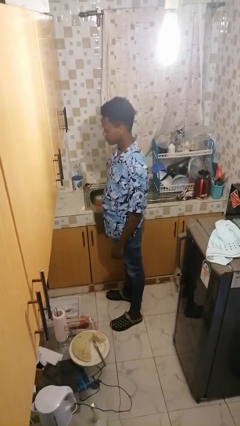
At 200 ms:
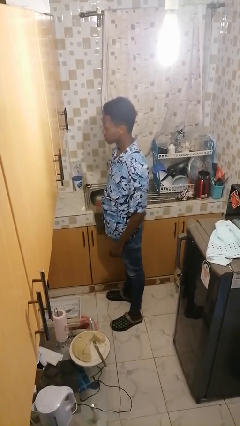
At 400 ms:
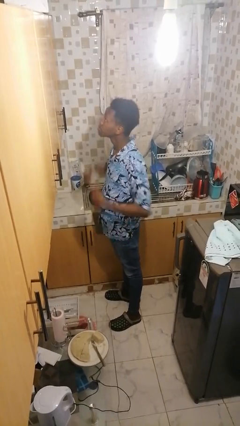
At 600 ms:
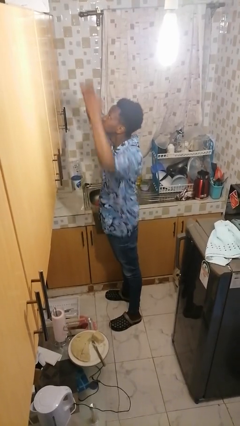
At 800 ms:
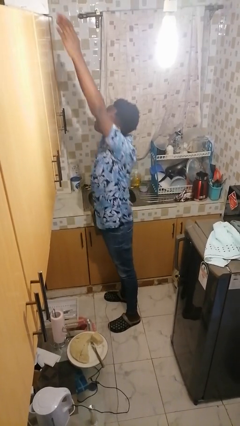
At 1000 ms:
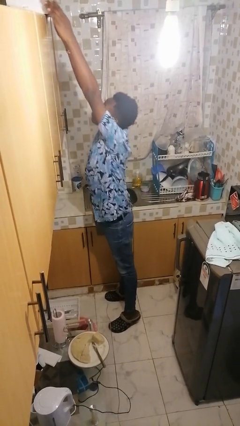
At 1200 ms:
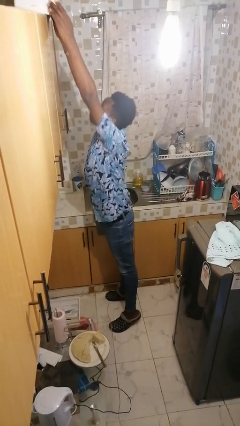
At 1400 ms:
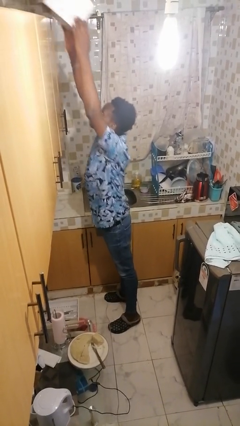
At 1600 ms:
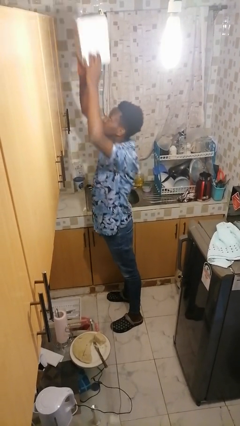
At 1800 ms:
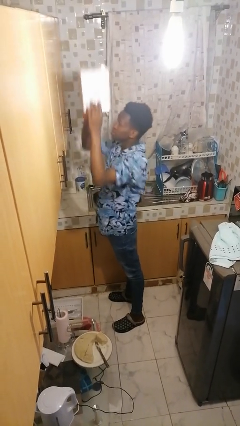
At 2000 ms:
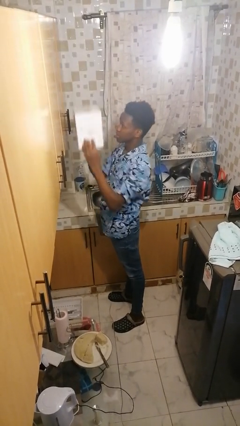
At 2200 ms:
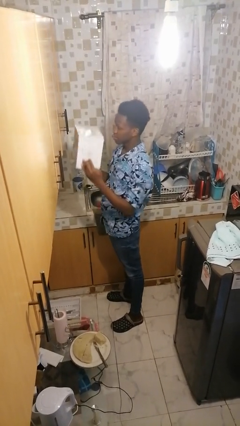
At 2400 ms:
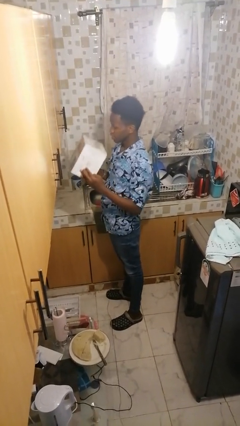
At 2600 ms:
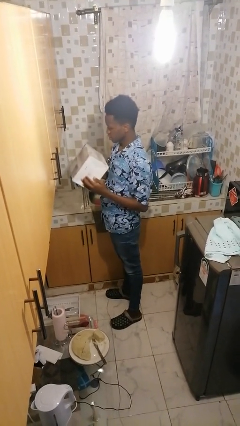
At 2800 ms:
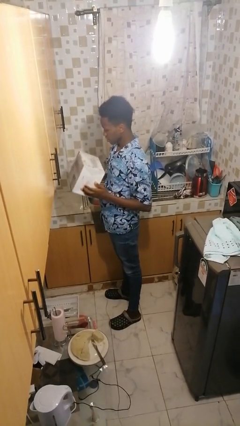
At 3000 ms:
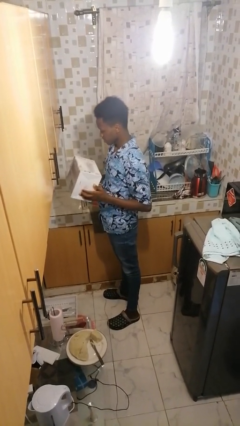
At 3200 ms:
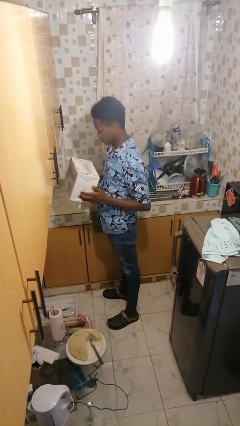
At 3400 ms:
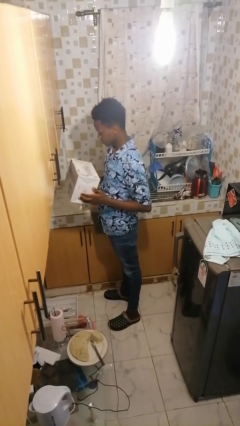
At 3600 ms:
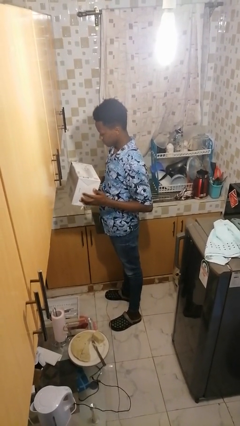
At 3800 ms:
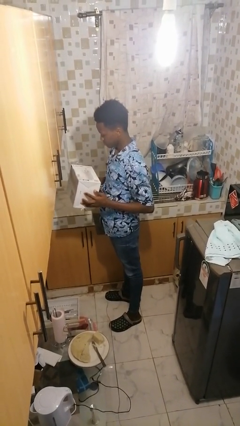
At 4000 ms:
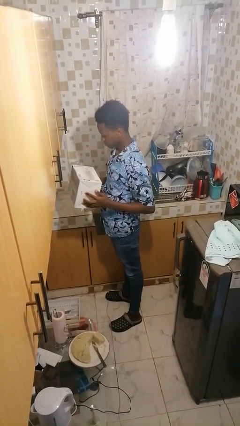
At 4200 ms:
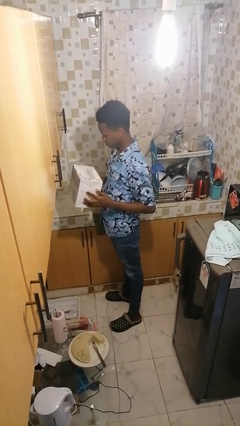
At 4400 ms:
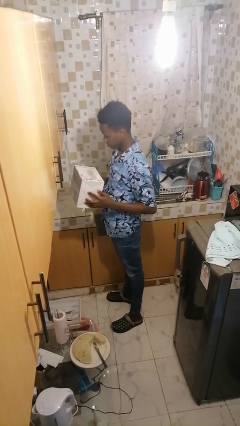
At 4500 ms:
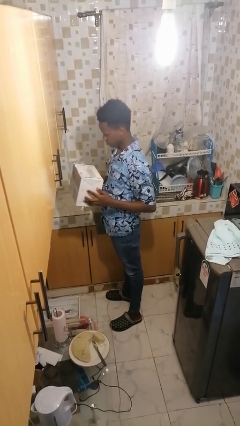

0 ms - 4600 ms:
person picks up object from shelf

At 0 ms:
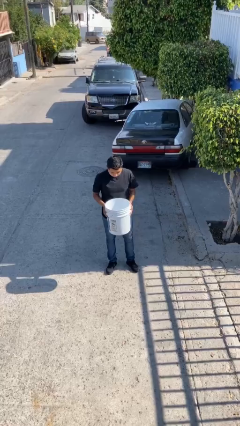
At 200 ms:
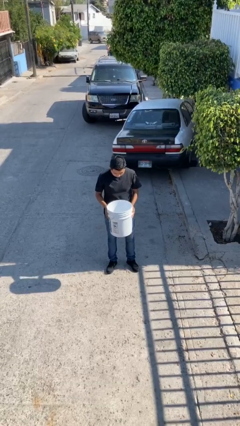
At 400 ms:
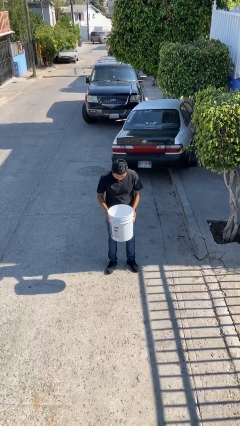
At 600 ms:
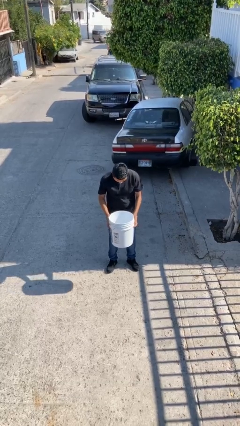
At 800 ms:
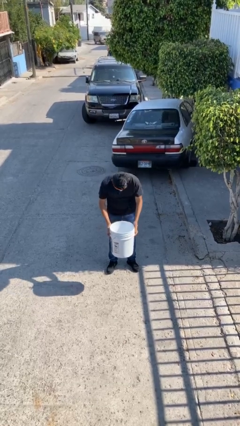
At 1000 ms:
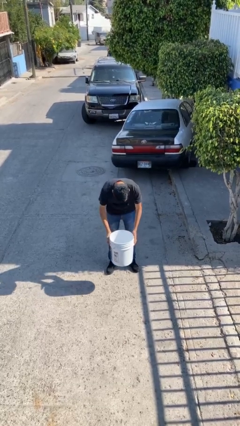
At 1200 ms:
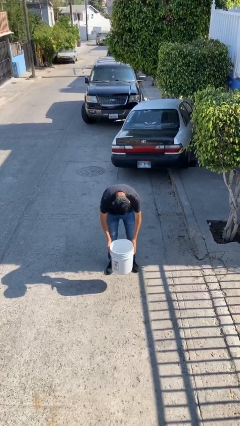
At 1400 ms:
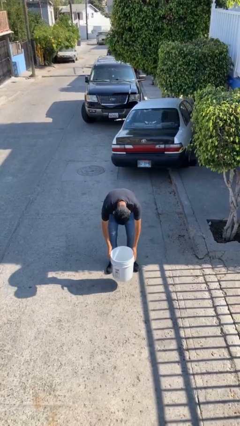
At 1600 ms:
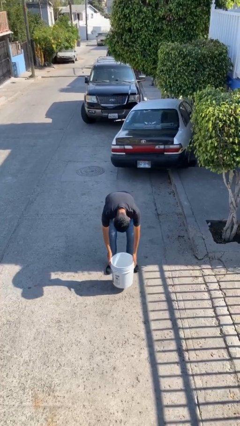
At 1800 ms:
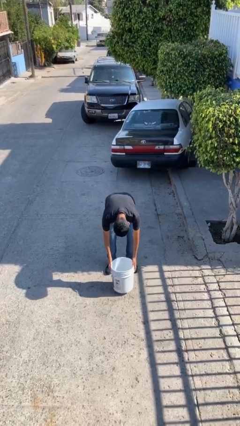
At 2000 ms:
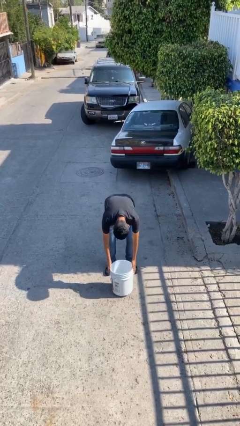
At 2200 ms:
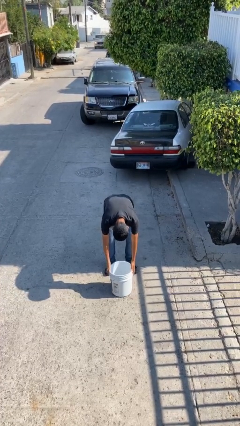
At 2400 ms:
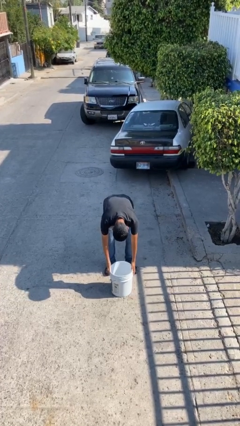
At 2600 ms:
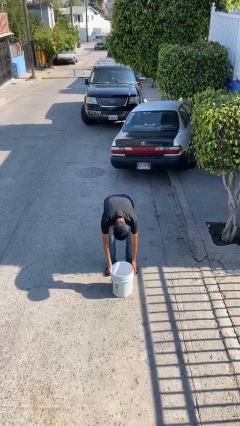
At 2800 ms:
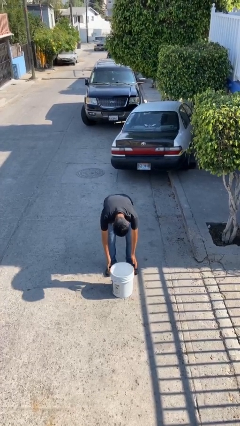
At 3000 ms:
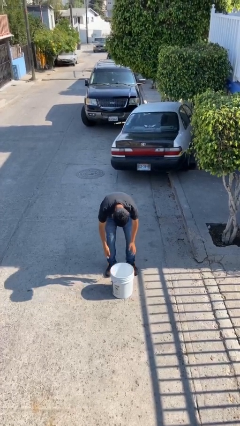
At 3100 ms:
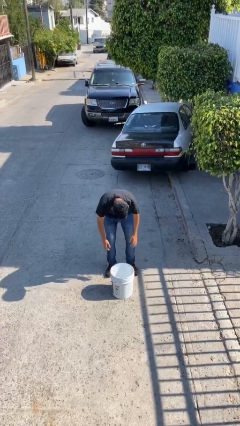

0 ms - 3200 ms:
person puts down object on floor

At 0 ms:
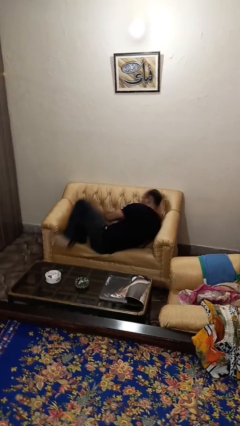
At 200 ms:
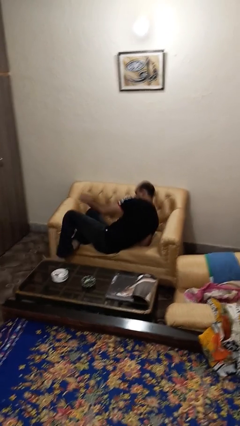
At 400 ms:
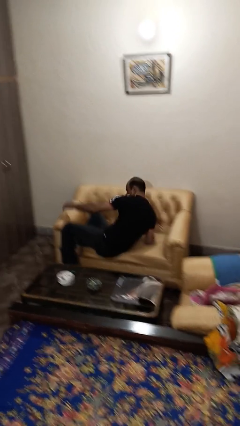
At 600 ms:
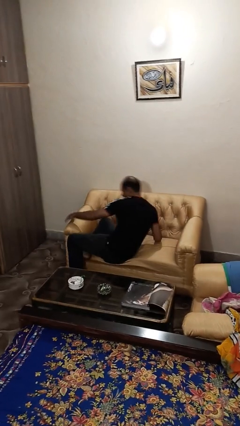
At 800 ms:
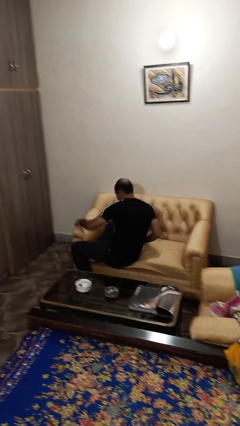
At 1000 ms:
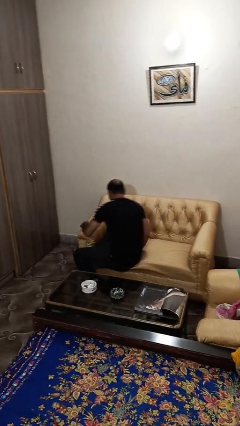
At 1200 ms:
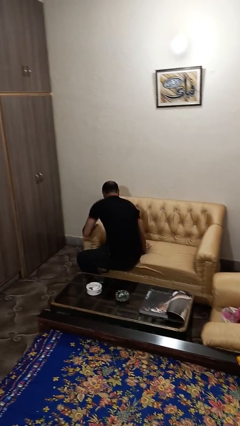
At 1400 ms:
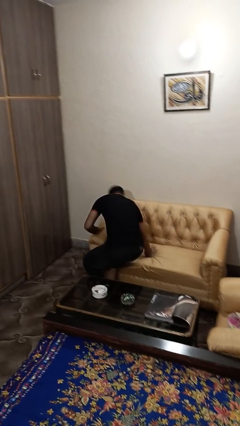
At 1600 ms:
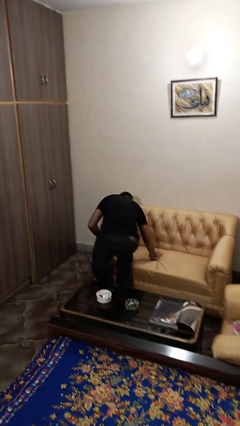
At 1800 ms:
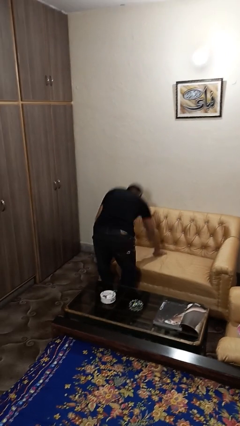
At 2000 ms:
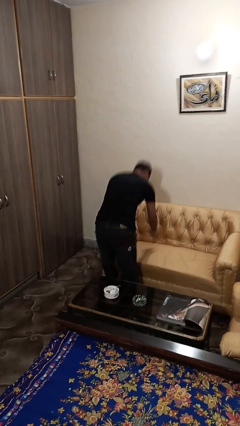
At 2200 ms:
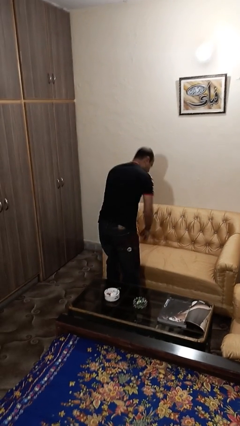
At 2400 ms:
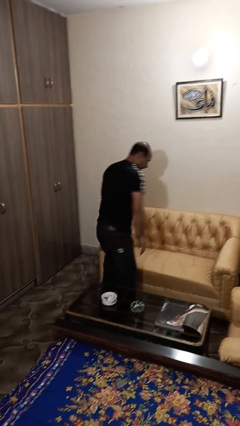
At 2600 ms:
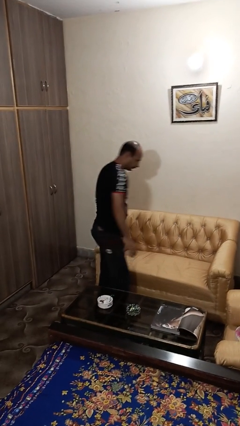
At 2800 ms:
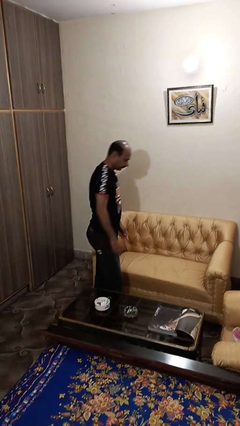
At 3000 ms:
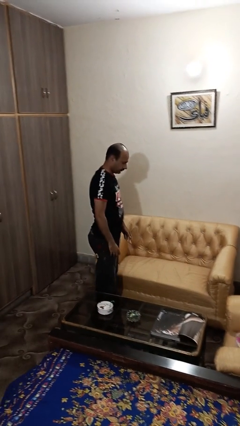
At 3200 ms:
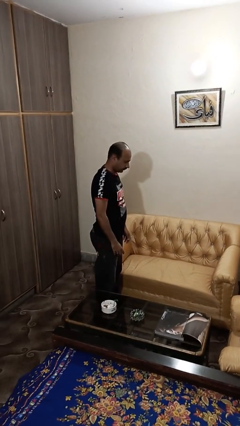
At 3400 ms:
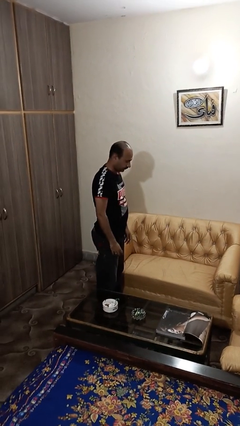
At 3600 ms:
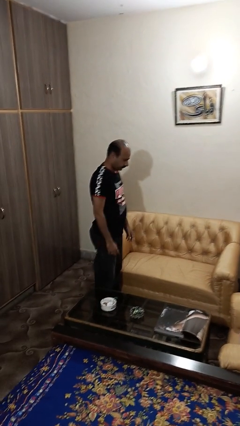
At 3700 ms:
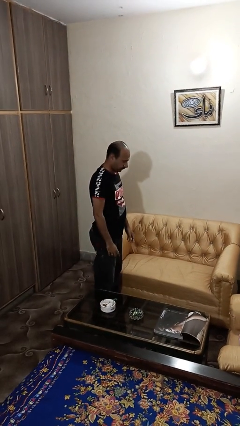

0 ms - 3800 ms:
person stands up

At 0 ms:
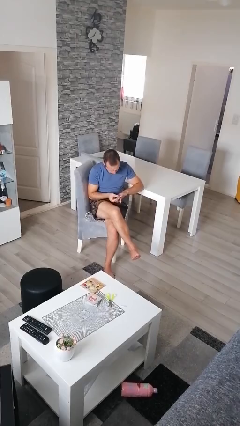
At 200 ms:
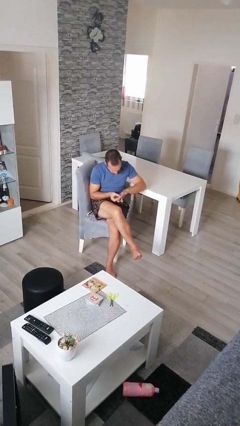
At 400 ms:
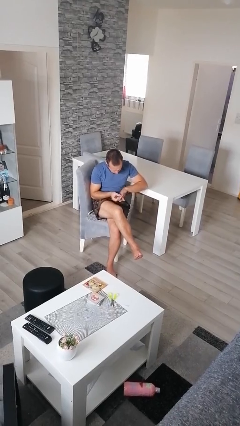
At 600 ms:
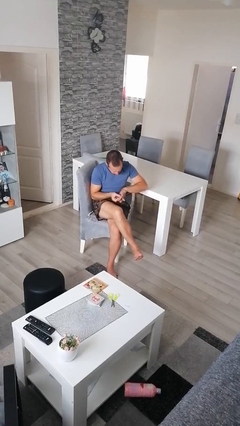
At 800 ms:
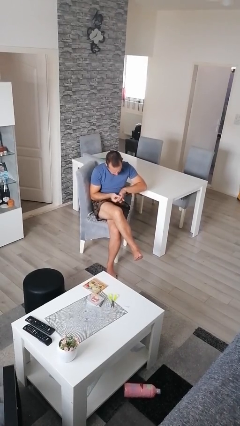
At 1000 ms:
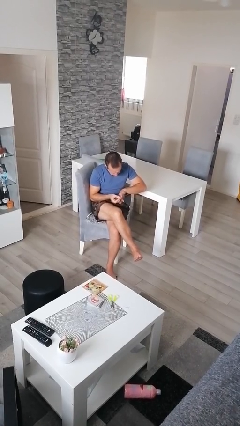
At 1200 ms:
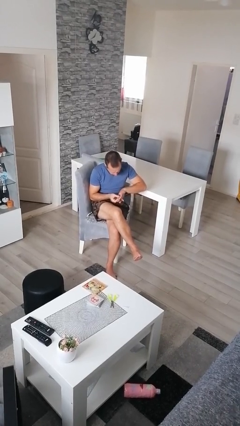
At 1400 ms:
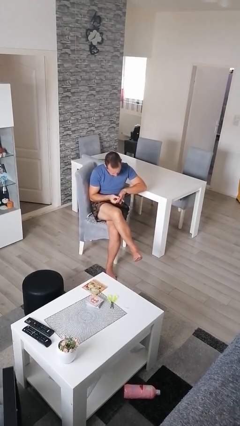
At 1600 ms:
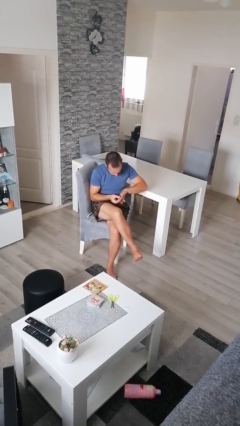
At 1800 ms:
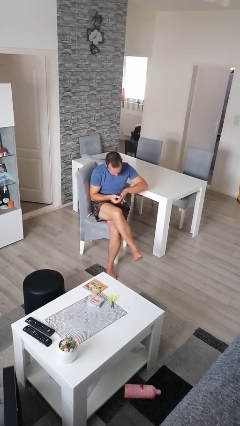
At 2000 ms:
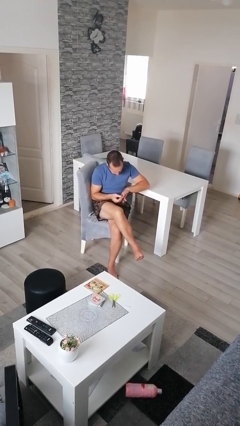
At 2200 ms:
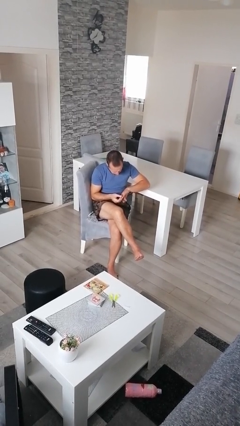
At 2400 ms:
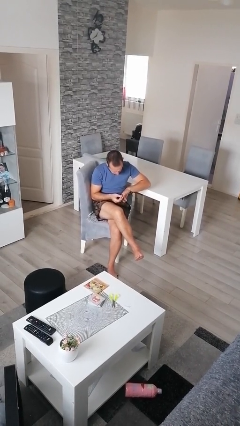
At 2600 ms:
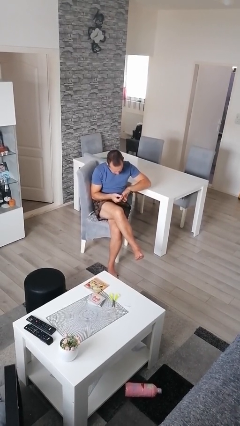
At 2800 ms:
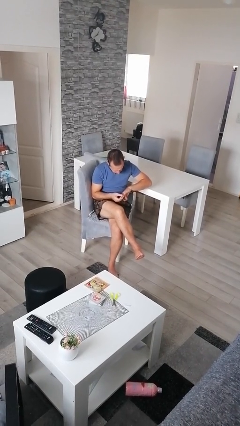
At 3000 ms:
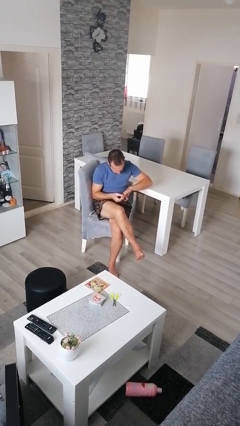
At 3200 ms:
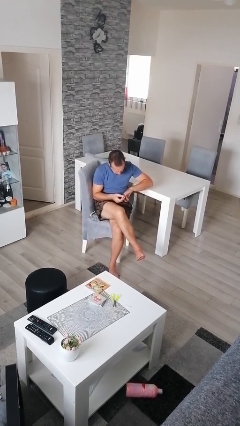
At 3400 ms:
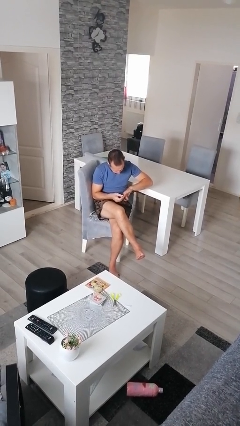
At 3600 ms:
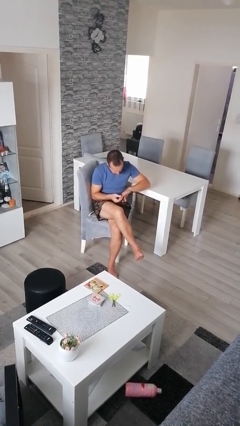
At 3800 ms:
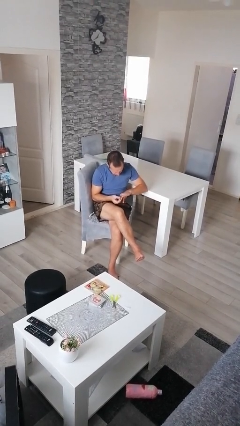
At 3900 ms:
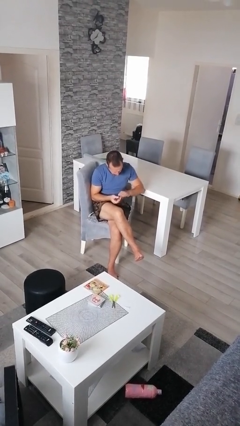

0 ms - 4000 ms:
person clips fingernails

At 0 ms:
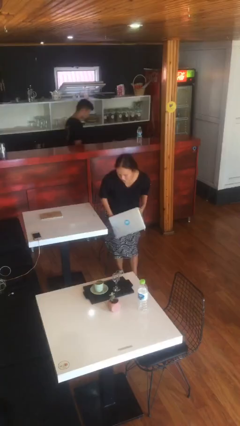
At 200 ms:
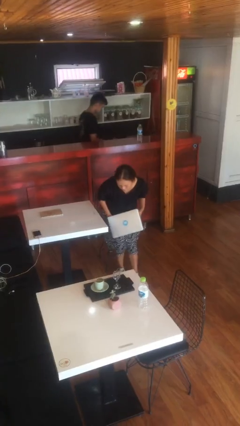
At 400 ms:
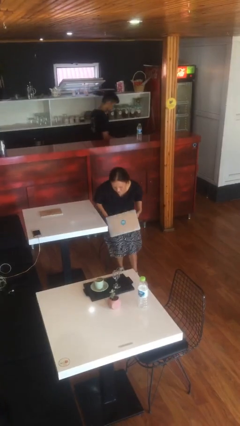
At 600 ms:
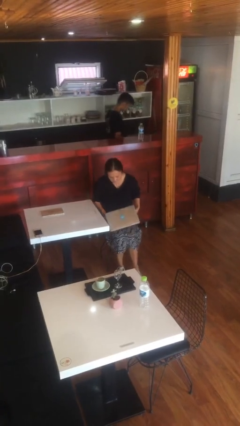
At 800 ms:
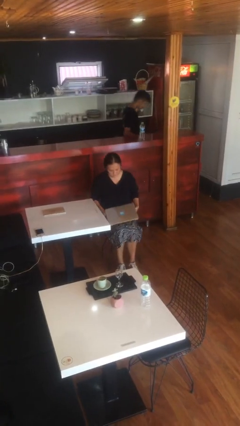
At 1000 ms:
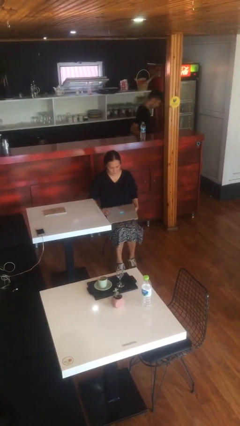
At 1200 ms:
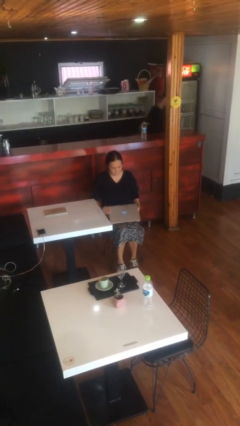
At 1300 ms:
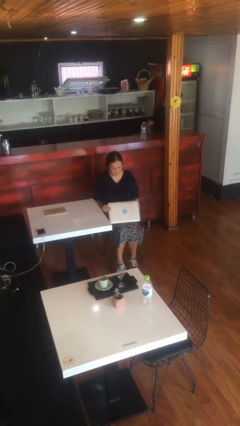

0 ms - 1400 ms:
person sits down

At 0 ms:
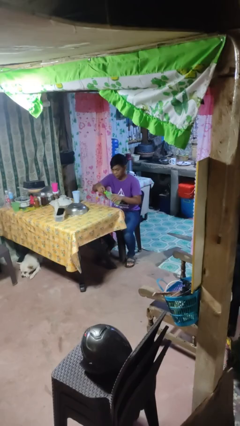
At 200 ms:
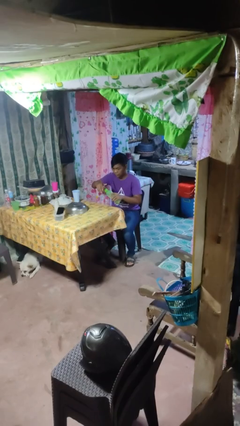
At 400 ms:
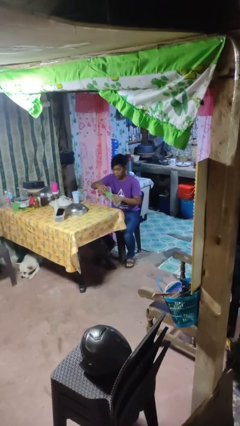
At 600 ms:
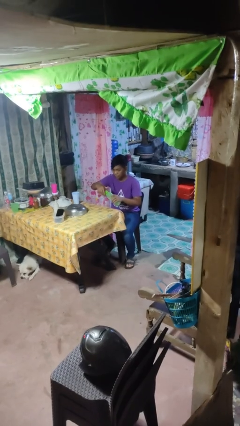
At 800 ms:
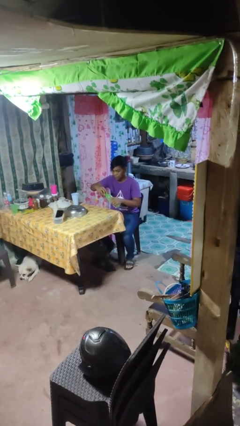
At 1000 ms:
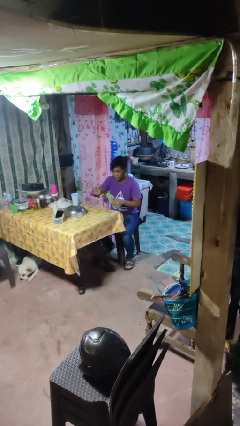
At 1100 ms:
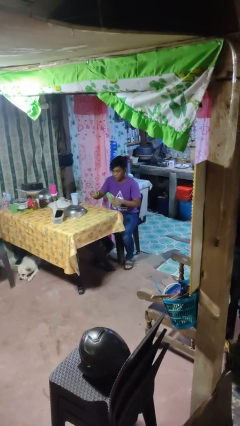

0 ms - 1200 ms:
person unscrews lid from bottle
